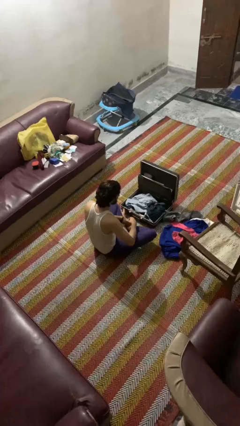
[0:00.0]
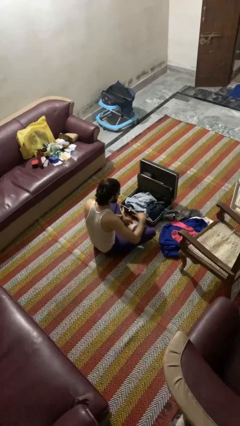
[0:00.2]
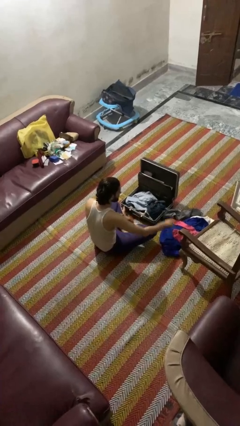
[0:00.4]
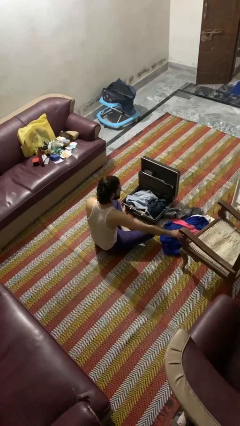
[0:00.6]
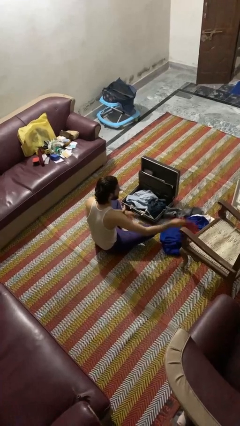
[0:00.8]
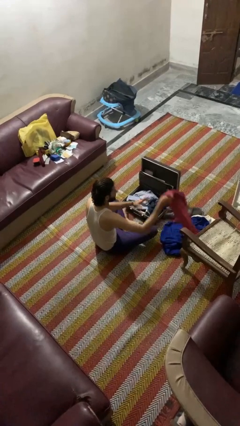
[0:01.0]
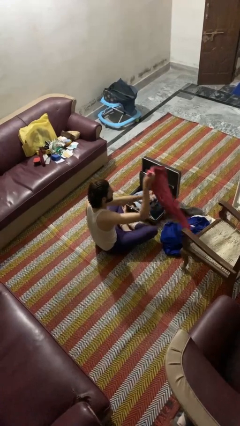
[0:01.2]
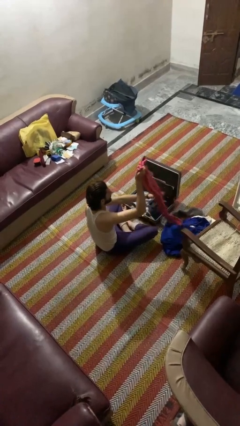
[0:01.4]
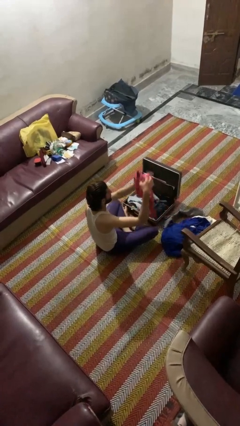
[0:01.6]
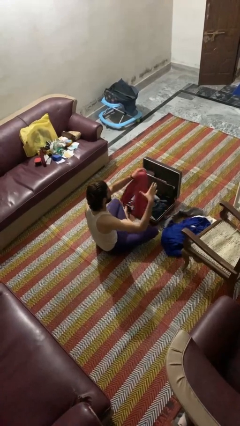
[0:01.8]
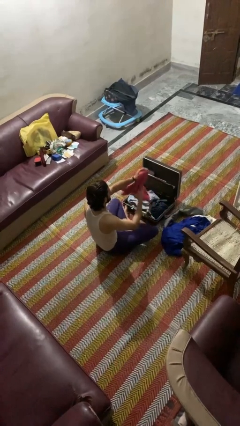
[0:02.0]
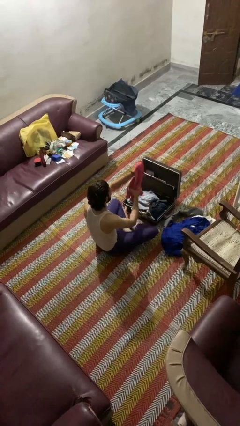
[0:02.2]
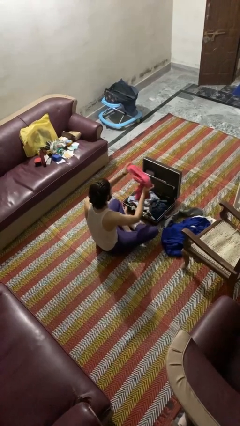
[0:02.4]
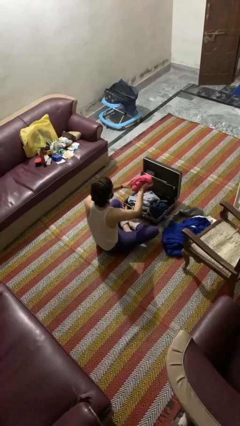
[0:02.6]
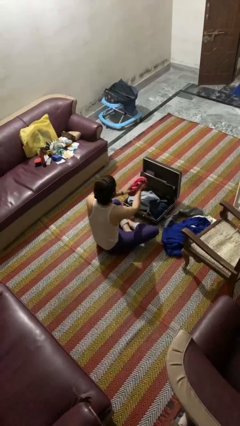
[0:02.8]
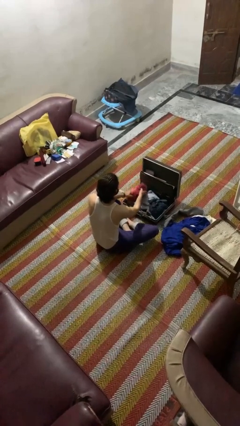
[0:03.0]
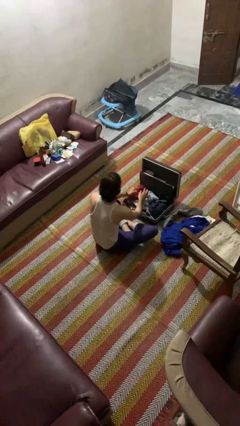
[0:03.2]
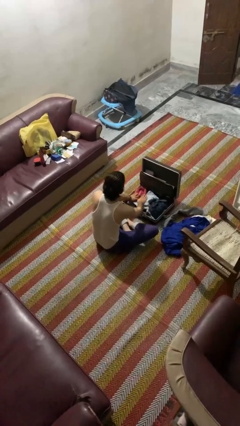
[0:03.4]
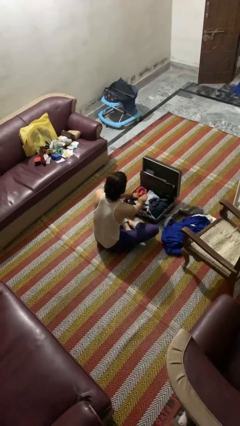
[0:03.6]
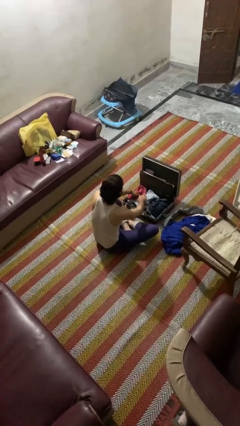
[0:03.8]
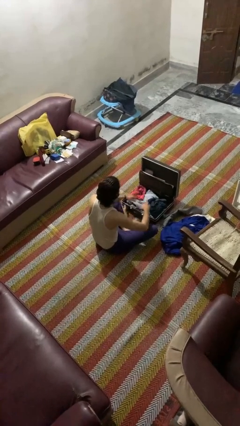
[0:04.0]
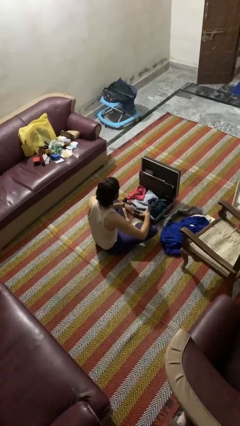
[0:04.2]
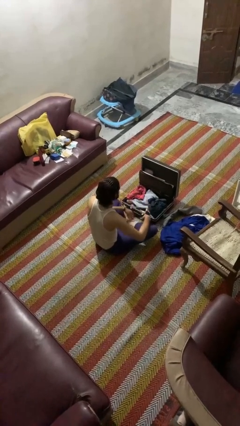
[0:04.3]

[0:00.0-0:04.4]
person loads clothes into suitcase

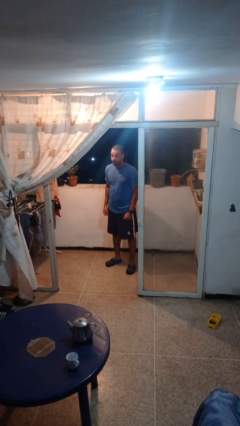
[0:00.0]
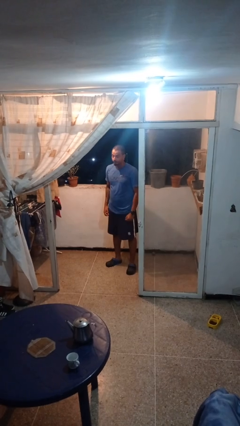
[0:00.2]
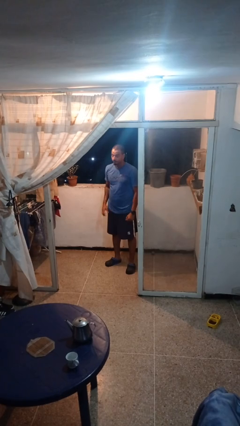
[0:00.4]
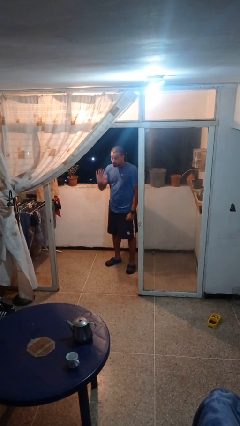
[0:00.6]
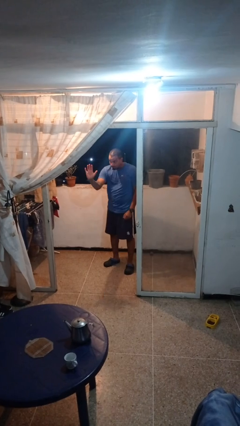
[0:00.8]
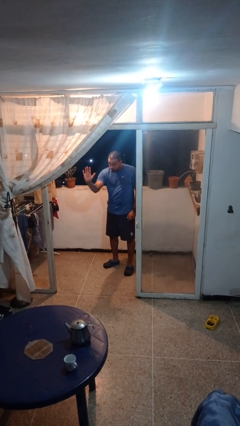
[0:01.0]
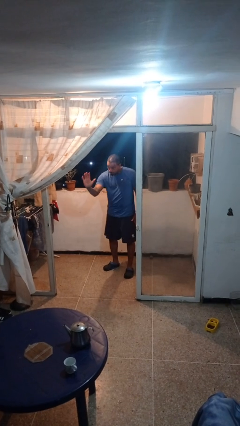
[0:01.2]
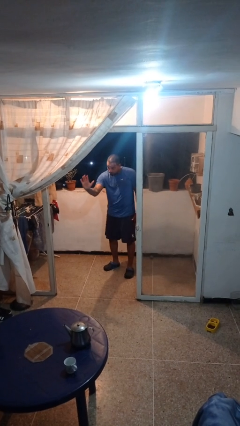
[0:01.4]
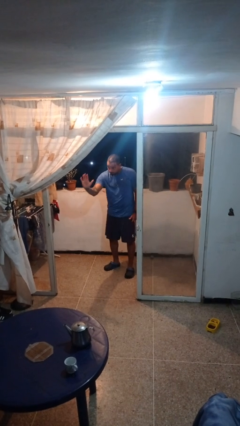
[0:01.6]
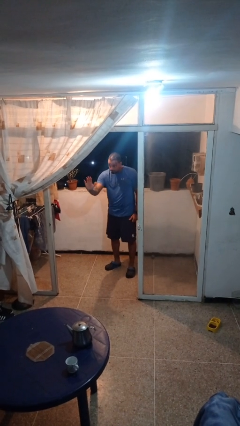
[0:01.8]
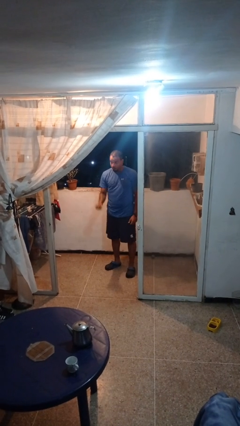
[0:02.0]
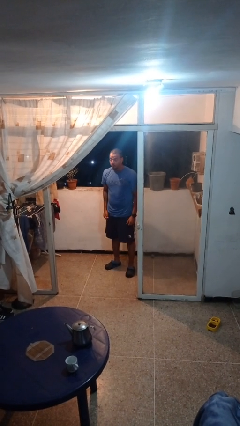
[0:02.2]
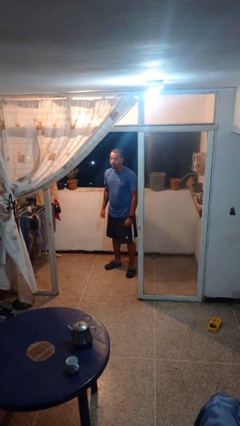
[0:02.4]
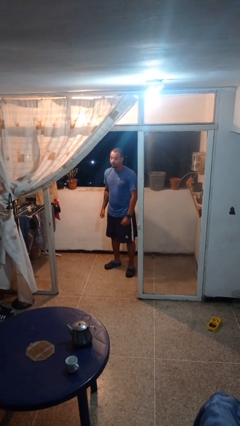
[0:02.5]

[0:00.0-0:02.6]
person gestures stop

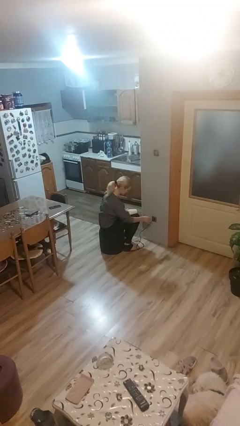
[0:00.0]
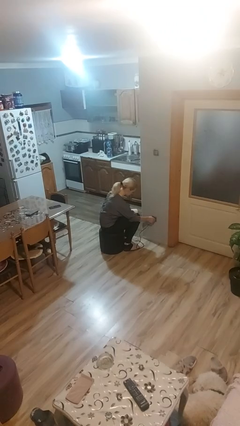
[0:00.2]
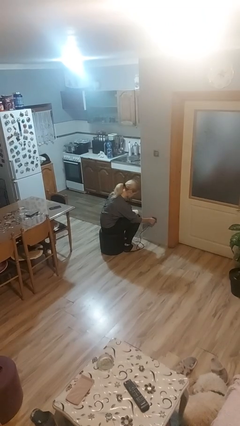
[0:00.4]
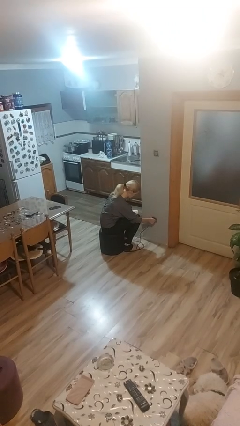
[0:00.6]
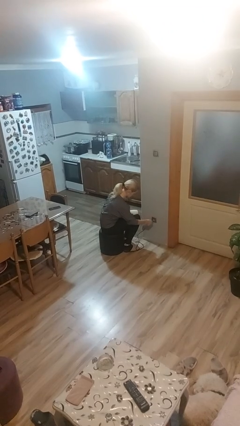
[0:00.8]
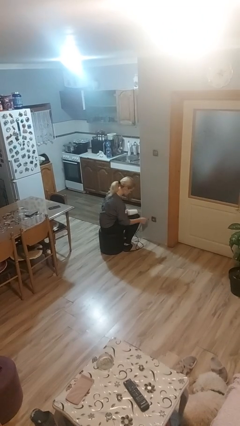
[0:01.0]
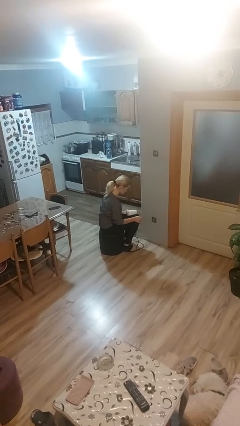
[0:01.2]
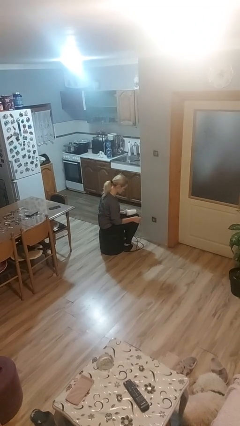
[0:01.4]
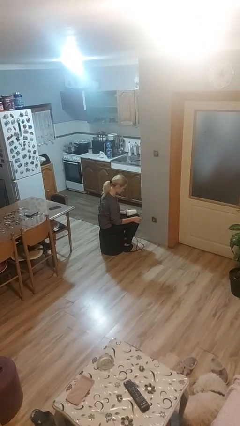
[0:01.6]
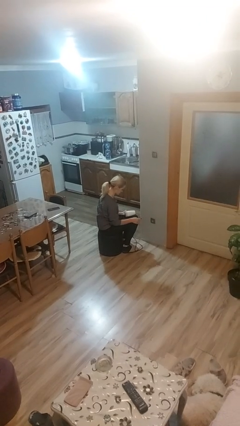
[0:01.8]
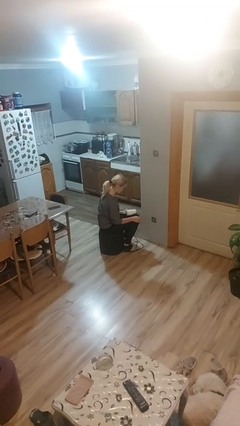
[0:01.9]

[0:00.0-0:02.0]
person unplugs from electrical socket

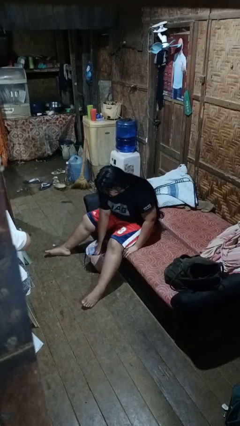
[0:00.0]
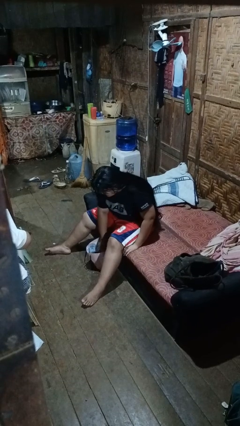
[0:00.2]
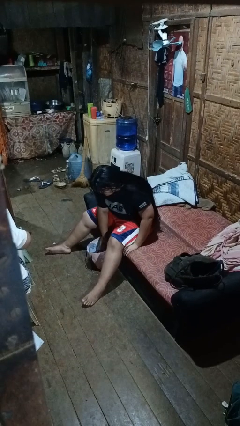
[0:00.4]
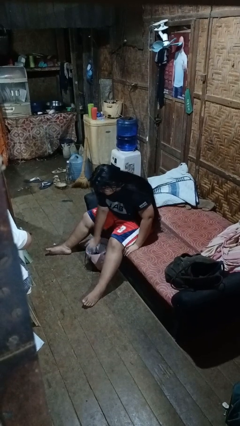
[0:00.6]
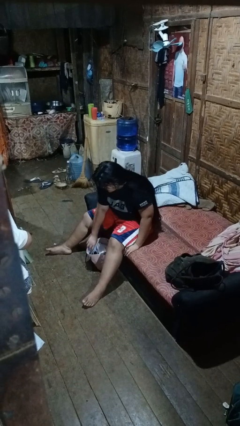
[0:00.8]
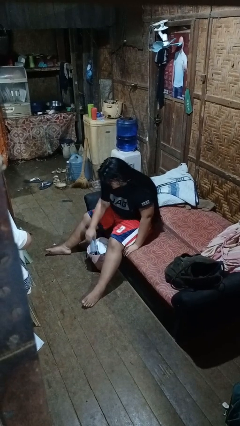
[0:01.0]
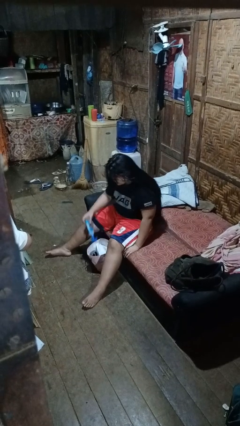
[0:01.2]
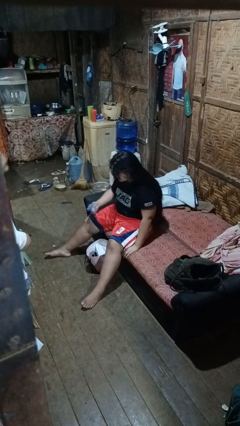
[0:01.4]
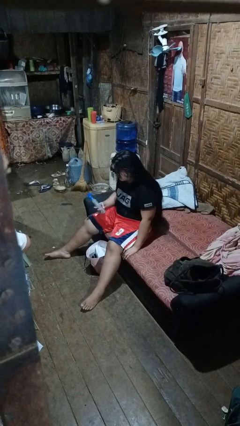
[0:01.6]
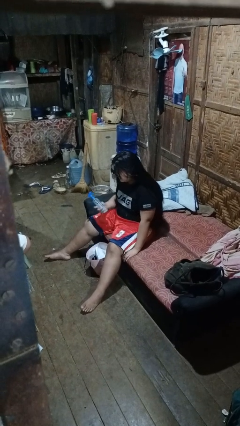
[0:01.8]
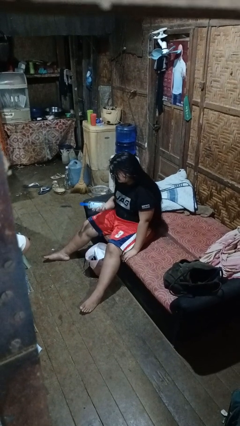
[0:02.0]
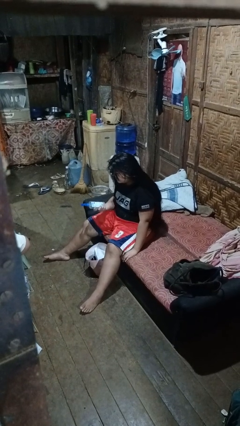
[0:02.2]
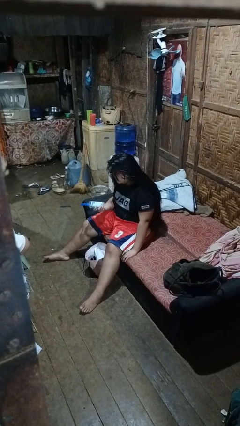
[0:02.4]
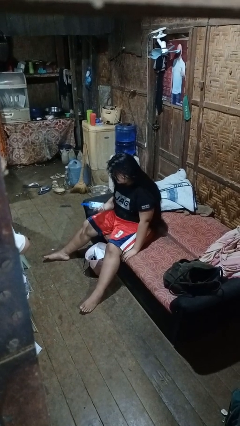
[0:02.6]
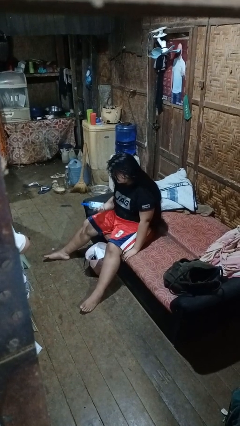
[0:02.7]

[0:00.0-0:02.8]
person takes object from bag

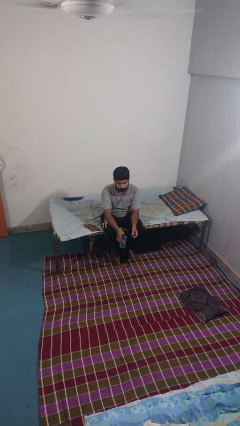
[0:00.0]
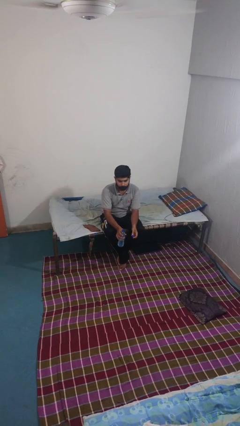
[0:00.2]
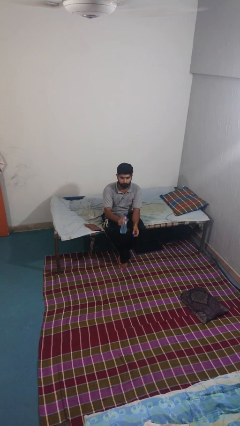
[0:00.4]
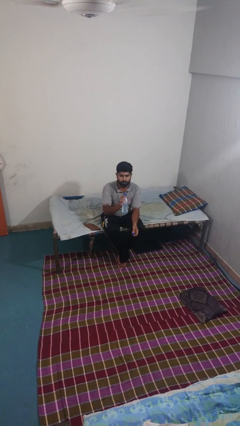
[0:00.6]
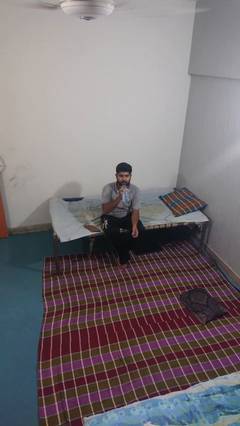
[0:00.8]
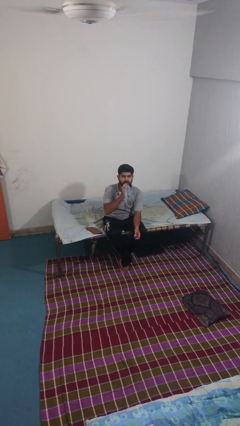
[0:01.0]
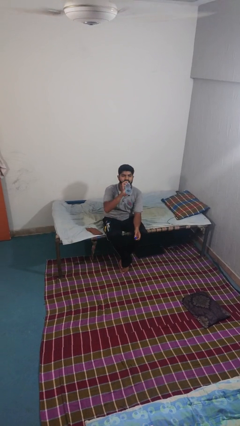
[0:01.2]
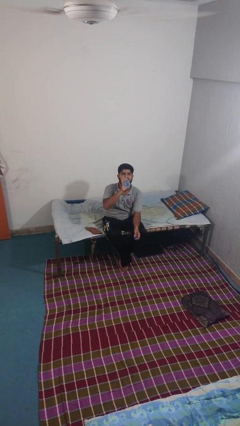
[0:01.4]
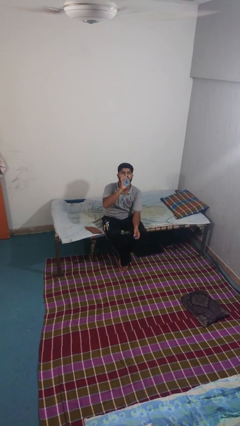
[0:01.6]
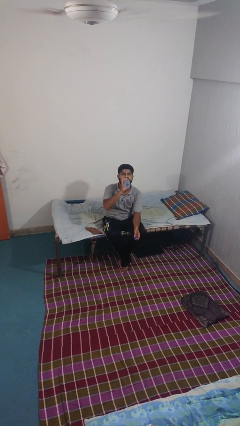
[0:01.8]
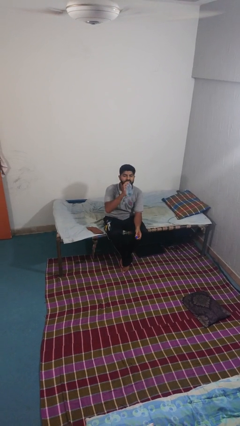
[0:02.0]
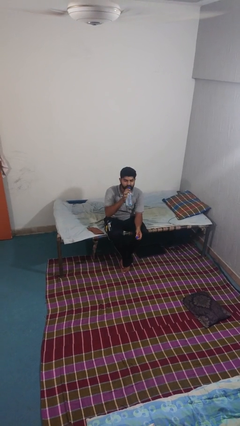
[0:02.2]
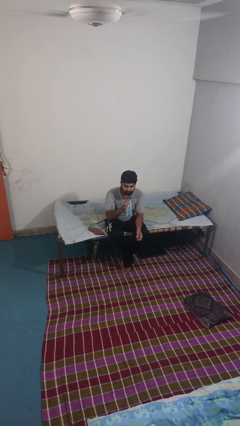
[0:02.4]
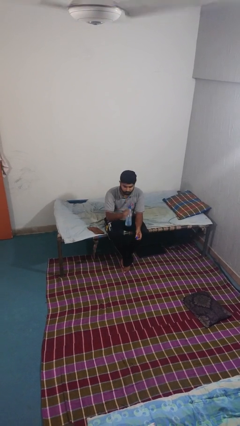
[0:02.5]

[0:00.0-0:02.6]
person drinks from bottle

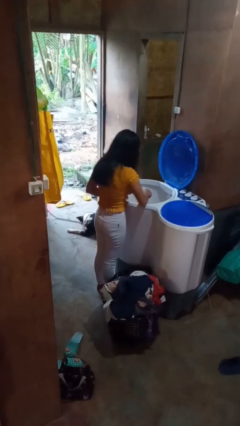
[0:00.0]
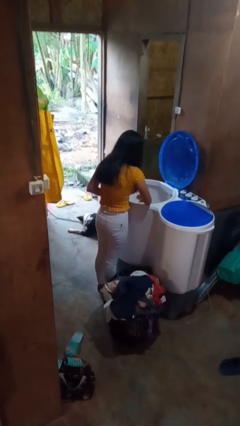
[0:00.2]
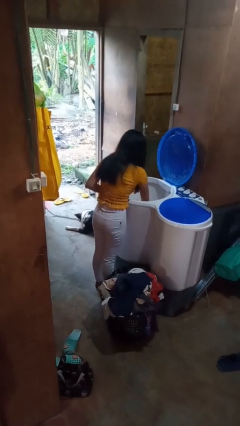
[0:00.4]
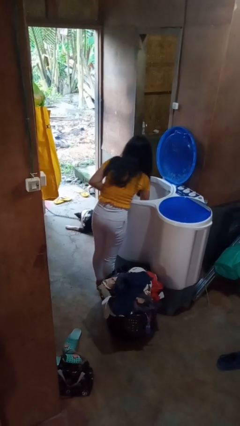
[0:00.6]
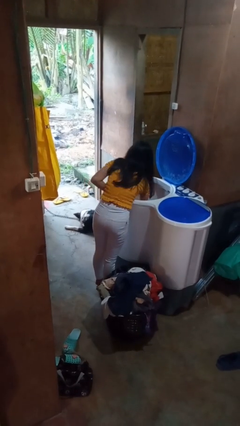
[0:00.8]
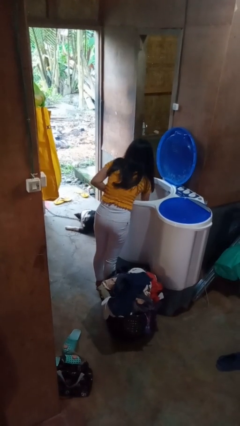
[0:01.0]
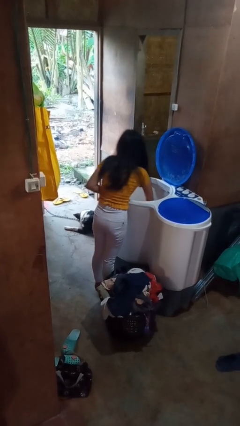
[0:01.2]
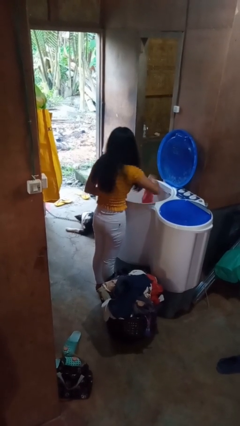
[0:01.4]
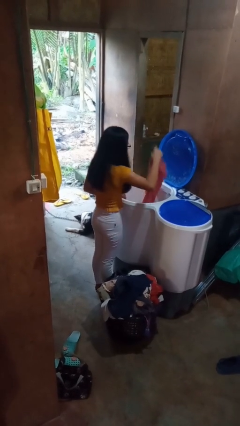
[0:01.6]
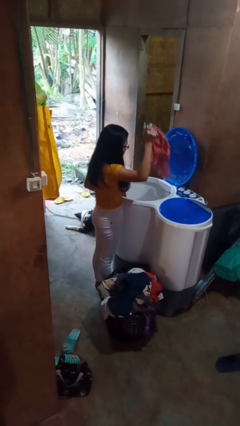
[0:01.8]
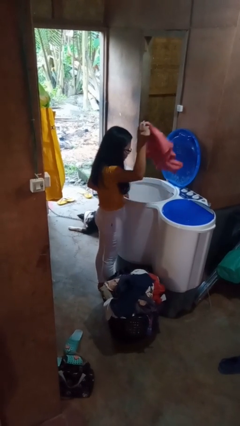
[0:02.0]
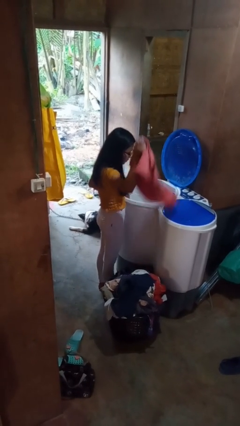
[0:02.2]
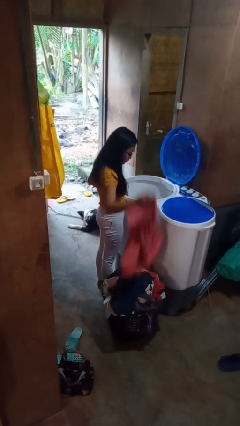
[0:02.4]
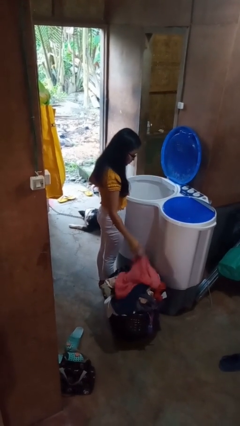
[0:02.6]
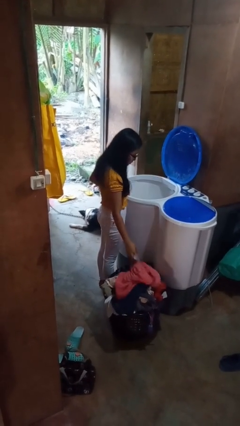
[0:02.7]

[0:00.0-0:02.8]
person unloads clotheswasher

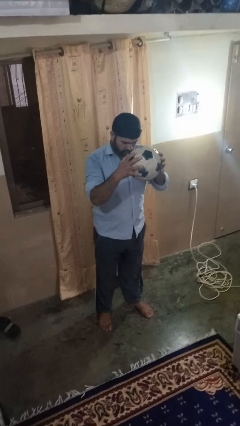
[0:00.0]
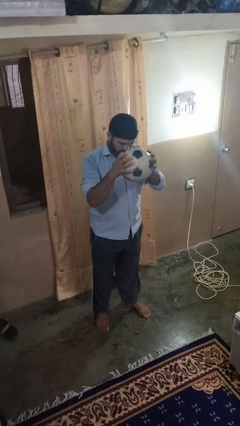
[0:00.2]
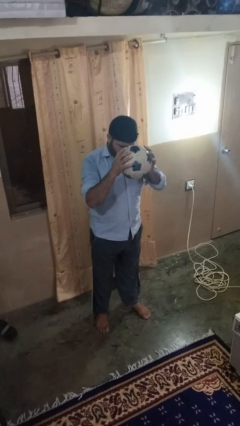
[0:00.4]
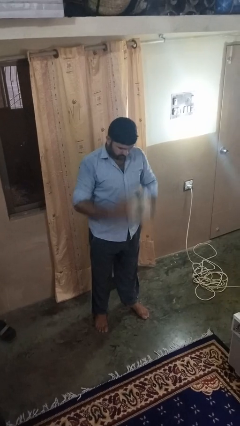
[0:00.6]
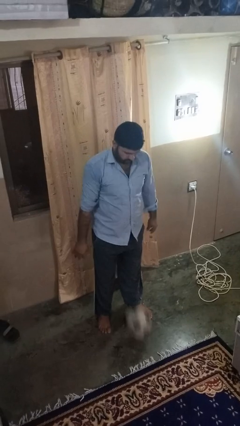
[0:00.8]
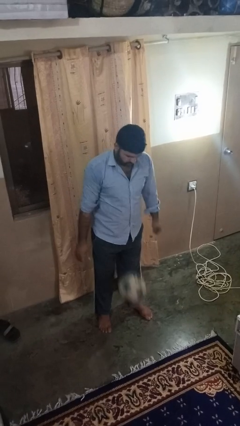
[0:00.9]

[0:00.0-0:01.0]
person bounces ball on floor
